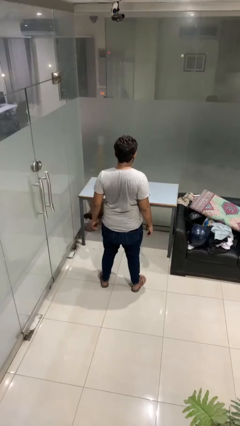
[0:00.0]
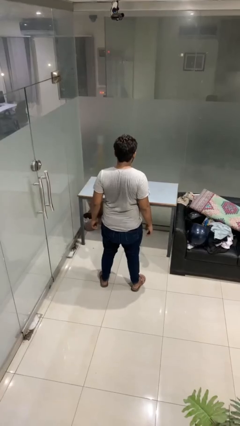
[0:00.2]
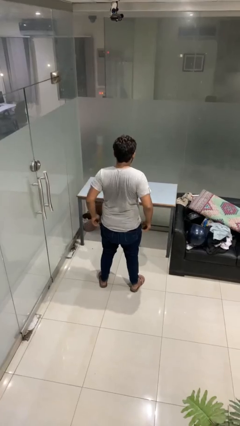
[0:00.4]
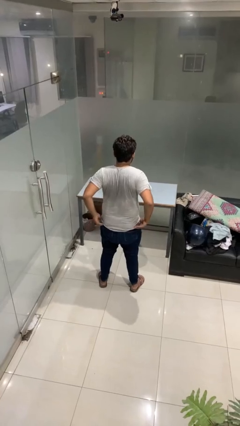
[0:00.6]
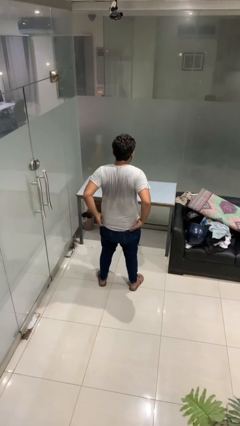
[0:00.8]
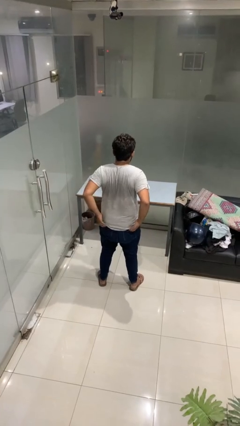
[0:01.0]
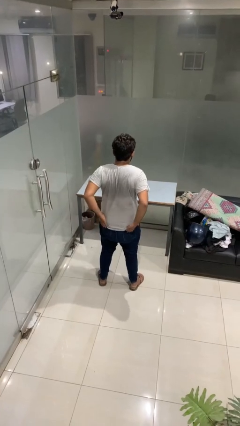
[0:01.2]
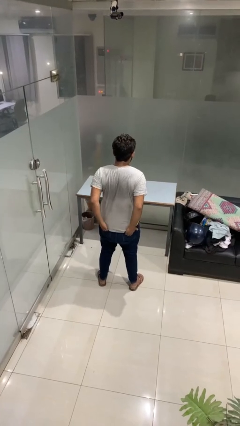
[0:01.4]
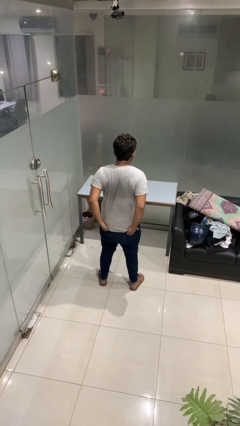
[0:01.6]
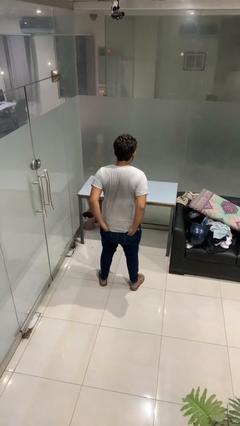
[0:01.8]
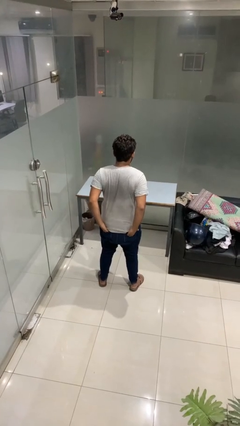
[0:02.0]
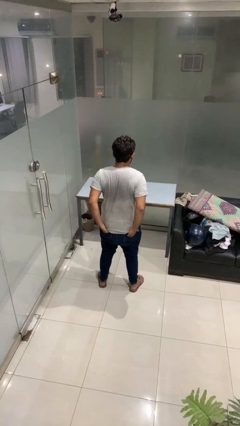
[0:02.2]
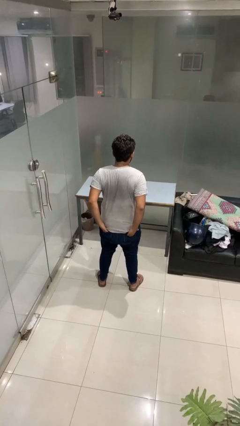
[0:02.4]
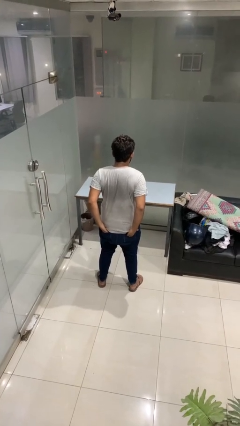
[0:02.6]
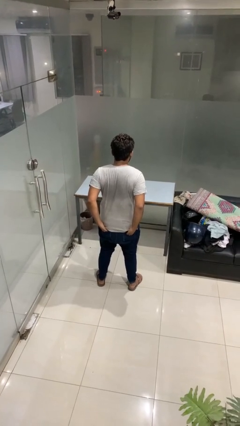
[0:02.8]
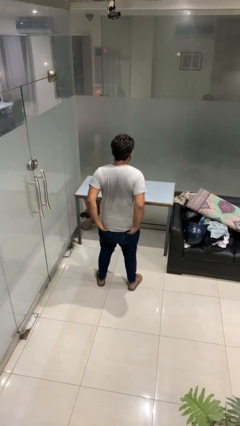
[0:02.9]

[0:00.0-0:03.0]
person puts hands in back pockets

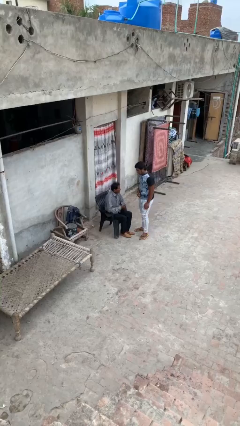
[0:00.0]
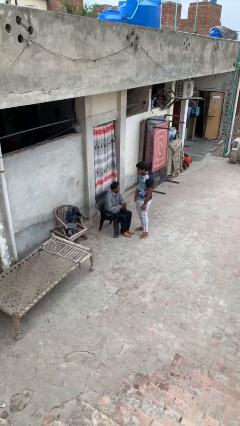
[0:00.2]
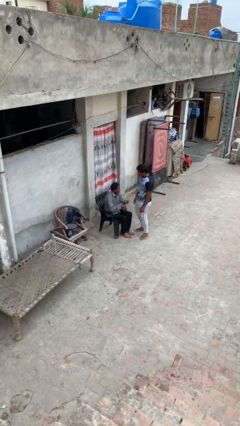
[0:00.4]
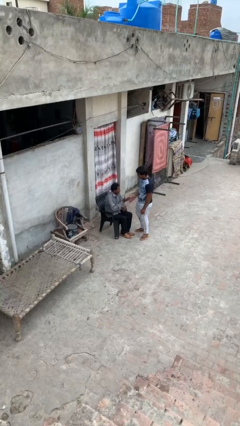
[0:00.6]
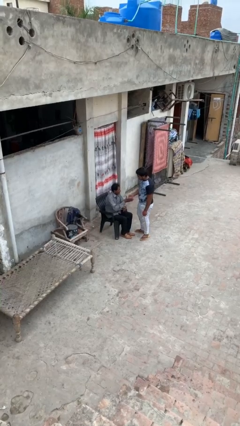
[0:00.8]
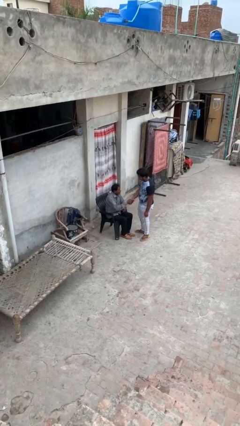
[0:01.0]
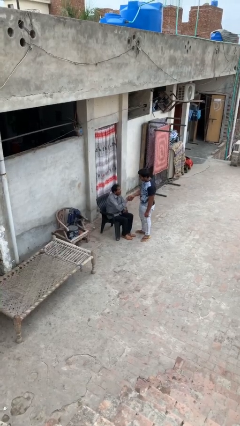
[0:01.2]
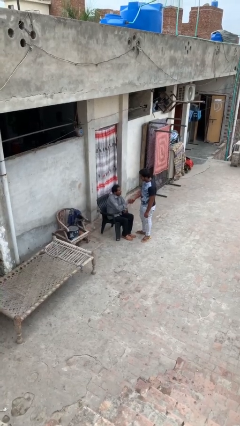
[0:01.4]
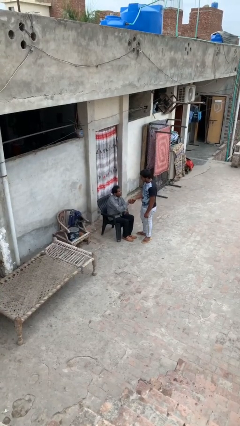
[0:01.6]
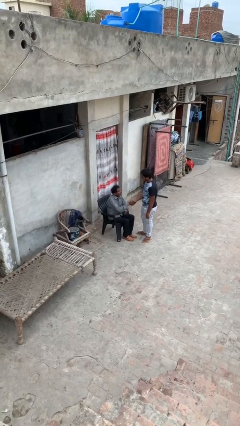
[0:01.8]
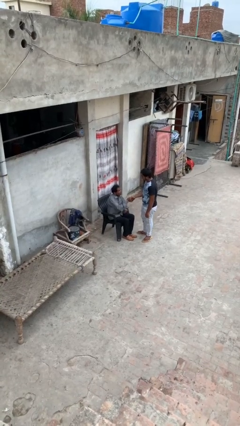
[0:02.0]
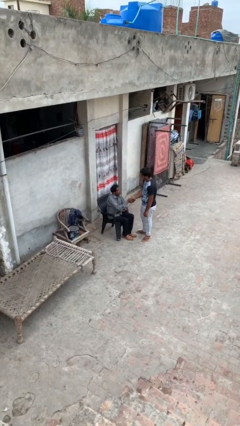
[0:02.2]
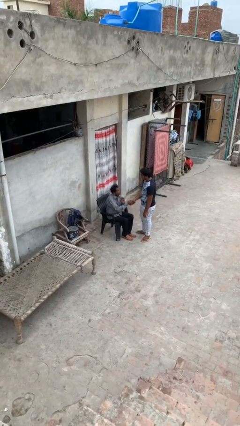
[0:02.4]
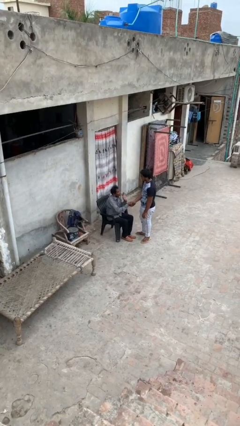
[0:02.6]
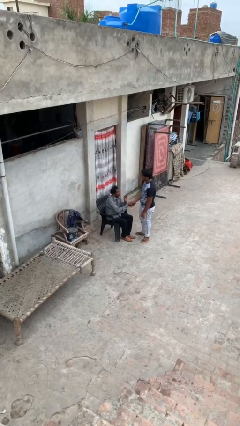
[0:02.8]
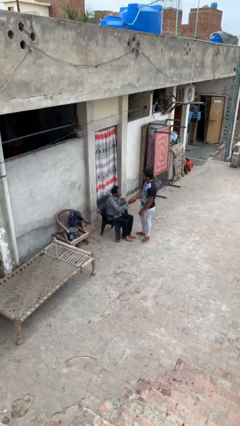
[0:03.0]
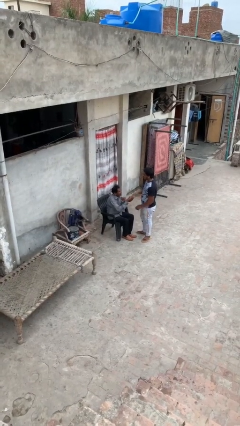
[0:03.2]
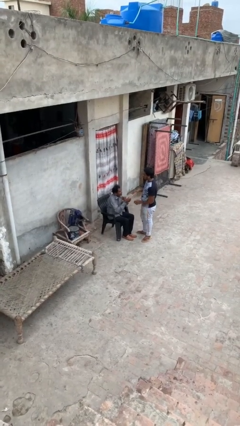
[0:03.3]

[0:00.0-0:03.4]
person shakes hand

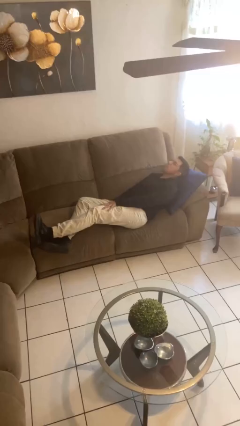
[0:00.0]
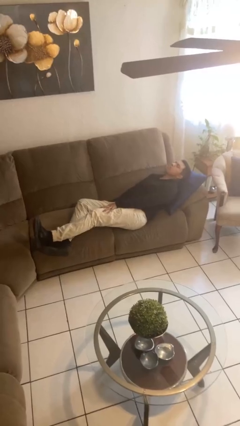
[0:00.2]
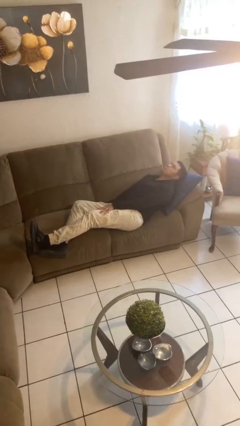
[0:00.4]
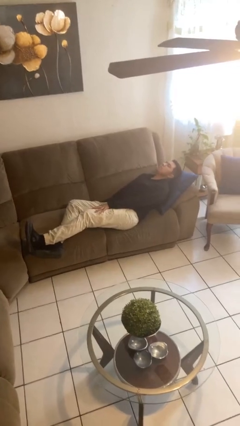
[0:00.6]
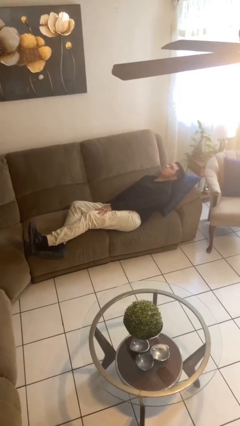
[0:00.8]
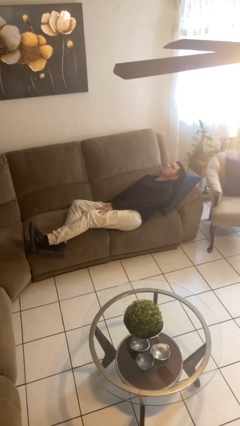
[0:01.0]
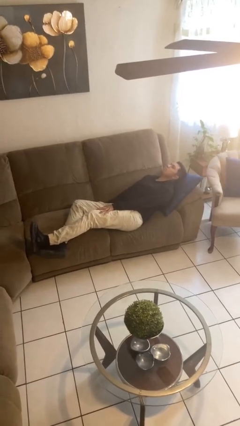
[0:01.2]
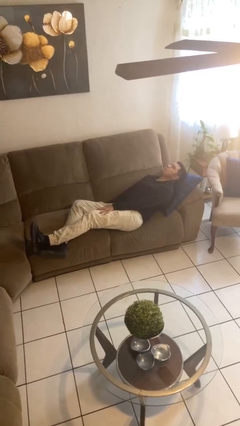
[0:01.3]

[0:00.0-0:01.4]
person lies down on couch

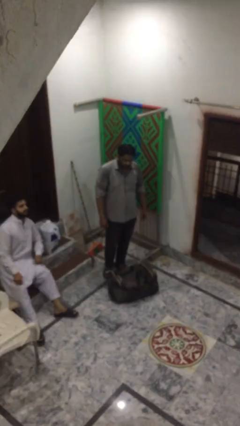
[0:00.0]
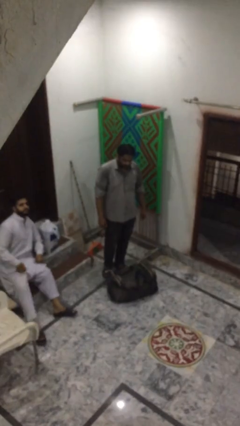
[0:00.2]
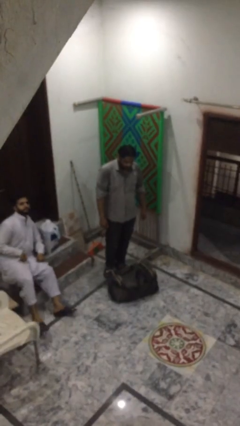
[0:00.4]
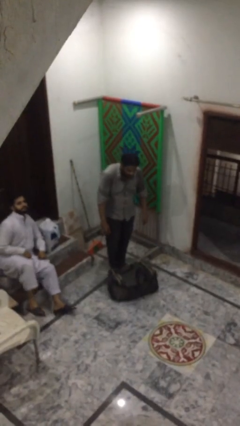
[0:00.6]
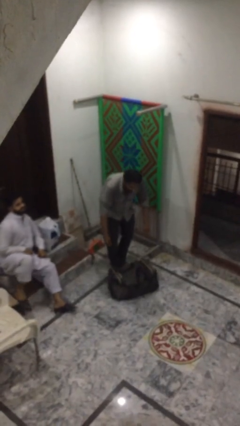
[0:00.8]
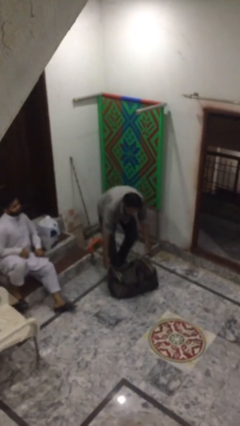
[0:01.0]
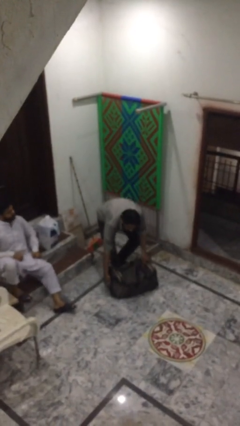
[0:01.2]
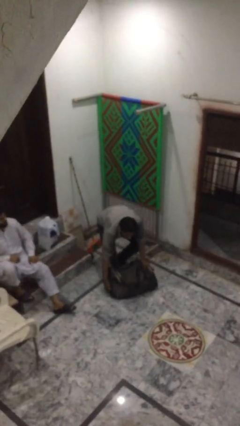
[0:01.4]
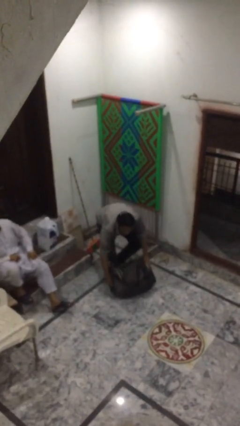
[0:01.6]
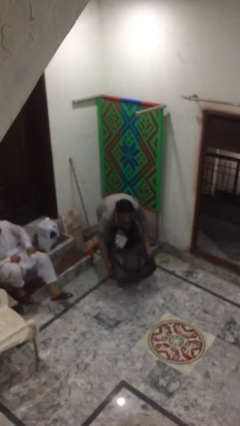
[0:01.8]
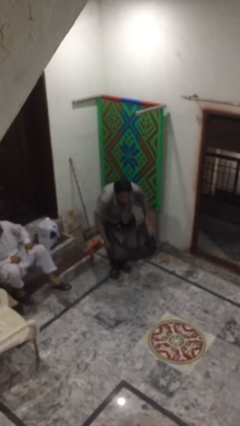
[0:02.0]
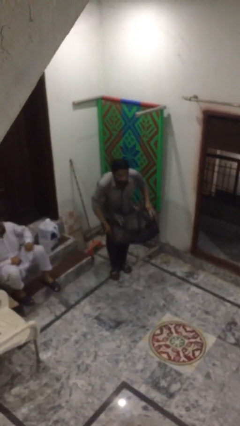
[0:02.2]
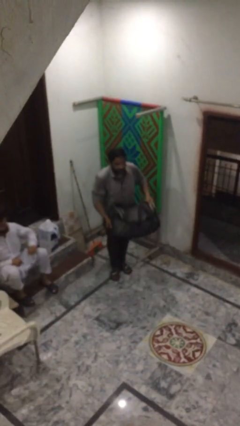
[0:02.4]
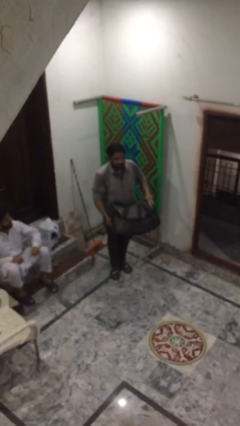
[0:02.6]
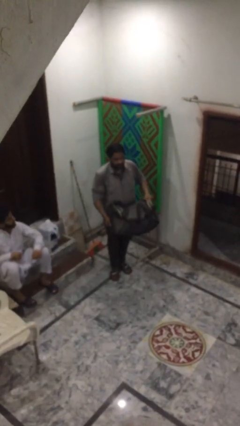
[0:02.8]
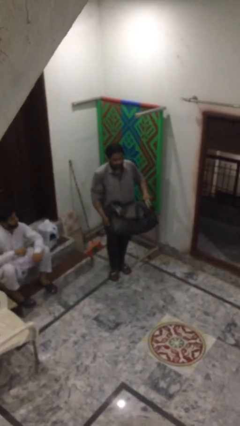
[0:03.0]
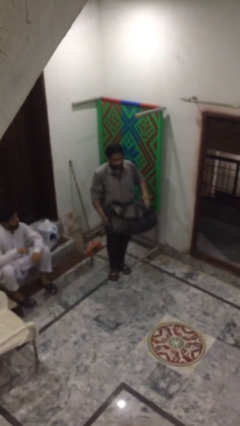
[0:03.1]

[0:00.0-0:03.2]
person picks up object from floor

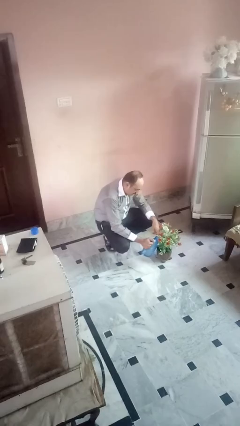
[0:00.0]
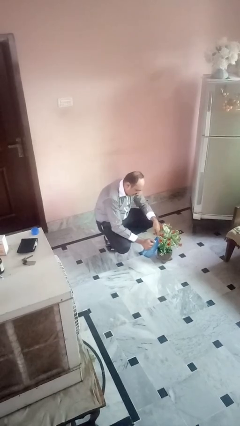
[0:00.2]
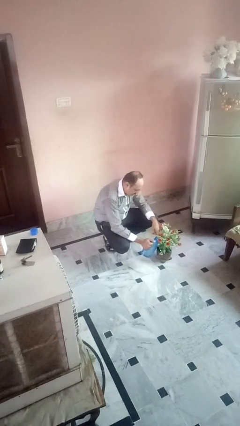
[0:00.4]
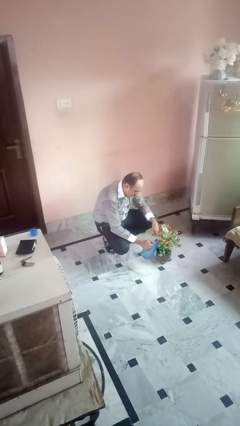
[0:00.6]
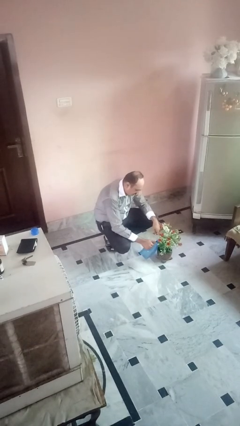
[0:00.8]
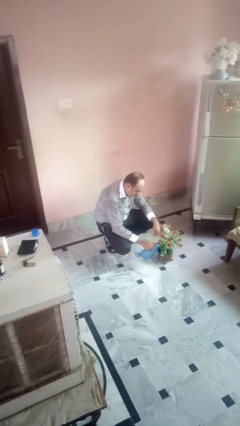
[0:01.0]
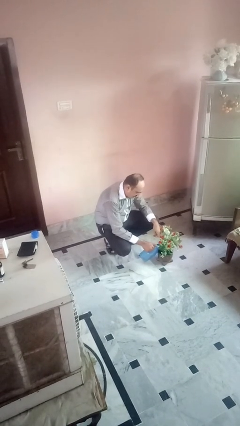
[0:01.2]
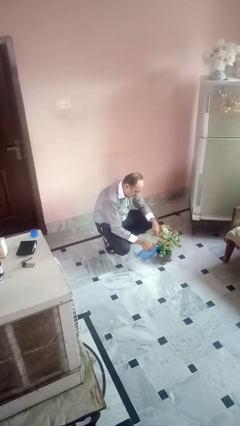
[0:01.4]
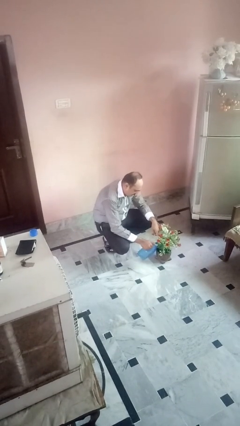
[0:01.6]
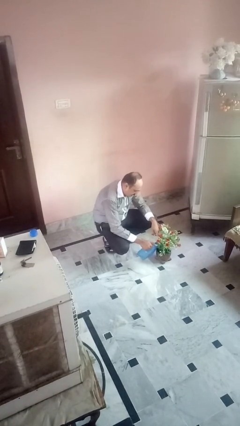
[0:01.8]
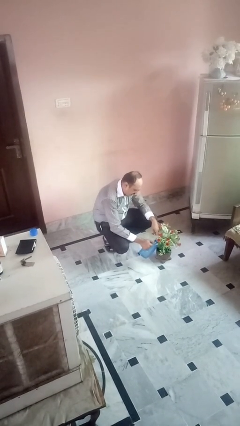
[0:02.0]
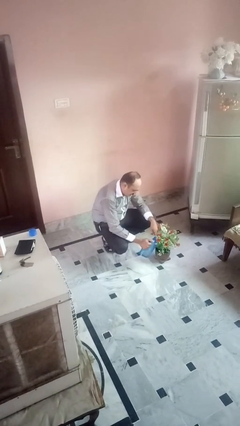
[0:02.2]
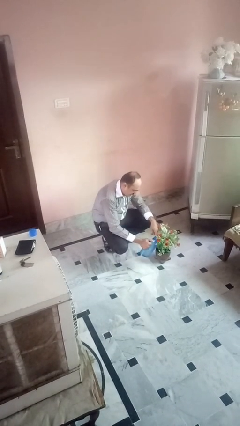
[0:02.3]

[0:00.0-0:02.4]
person waters houseplant

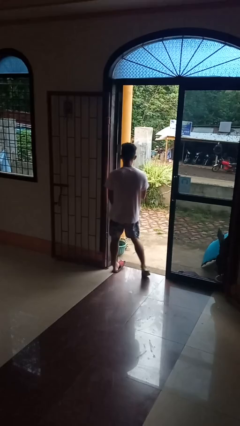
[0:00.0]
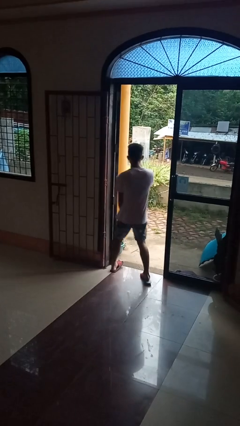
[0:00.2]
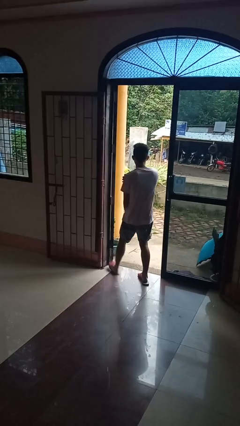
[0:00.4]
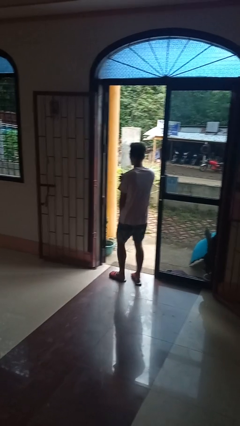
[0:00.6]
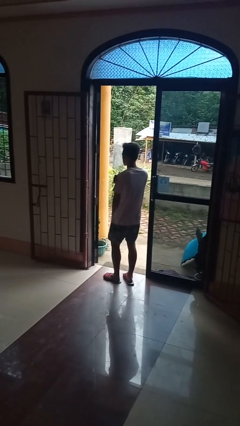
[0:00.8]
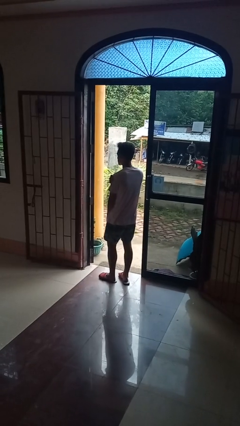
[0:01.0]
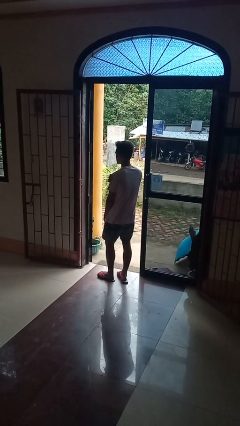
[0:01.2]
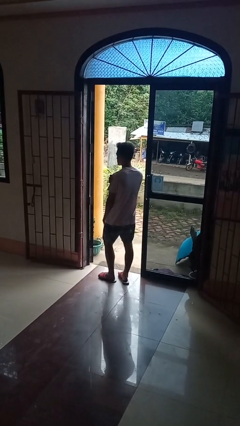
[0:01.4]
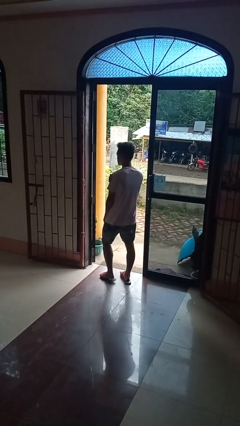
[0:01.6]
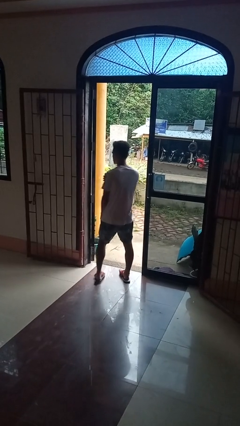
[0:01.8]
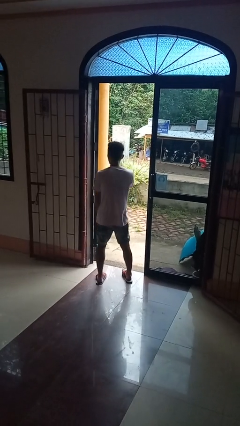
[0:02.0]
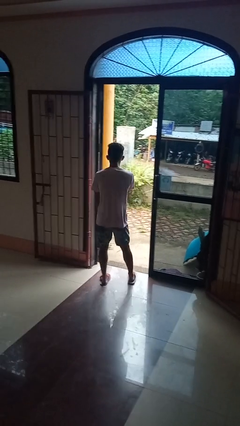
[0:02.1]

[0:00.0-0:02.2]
person bumps into wall

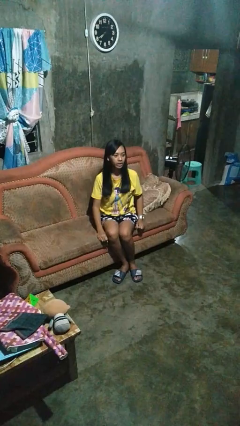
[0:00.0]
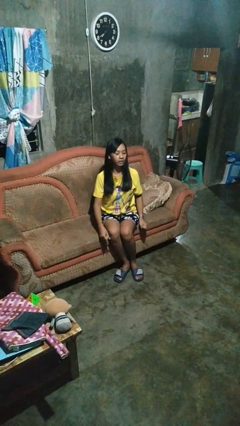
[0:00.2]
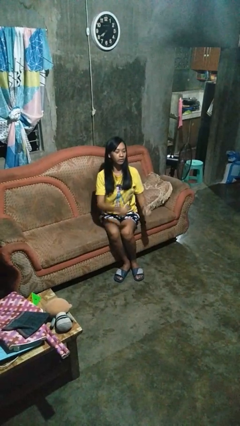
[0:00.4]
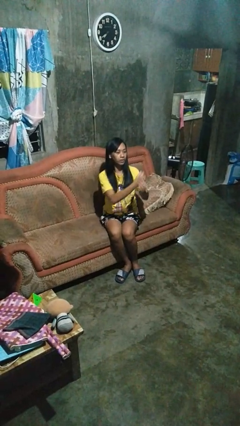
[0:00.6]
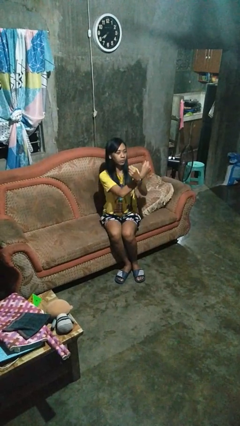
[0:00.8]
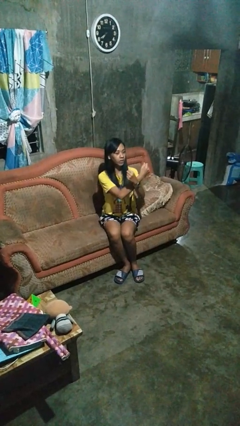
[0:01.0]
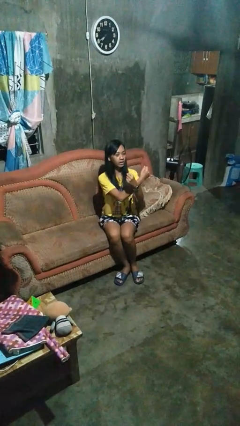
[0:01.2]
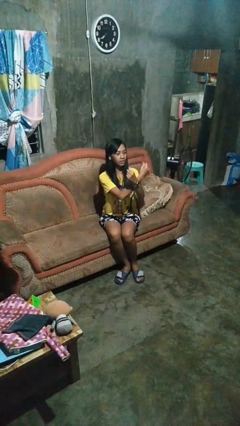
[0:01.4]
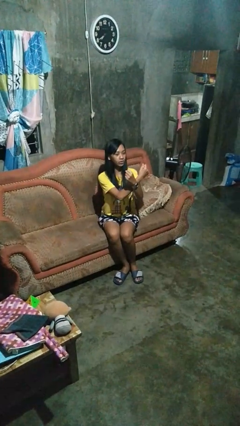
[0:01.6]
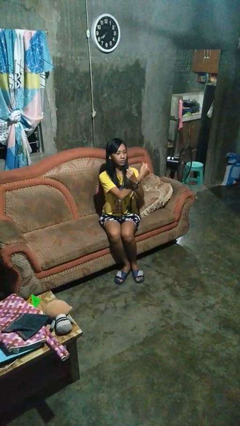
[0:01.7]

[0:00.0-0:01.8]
person gestures arms x
